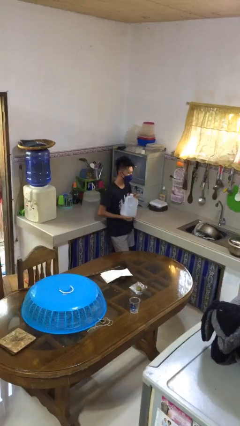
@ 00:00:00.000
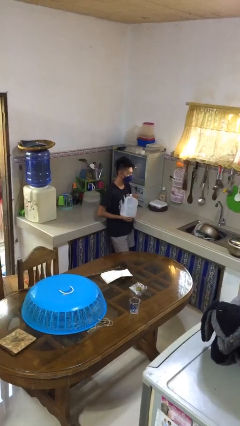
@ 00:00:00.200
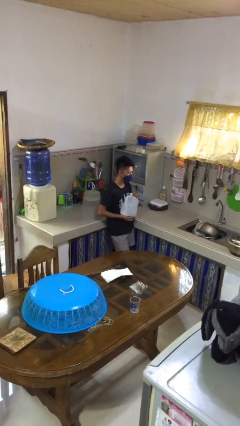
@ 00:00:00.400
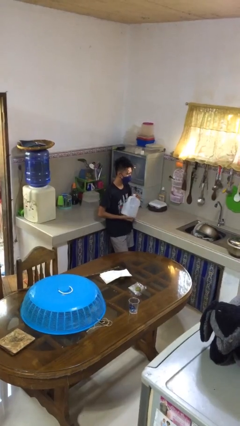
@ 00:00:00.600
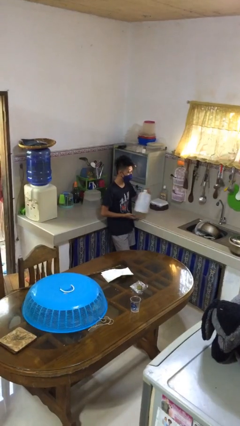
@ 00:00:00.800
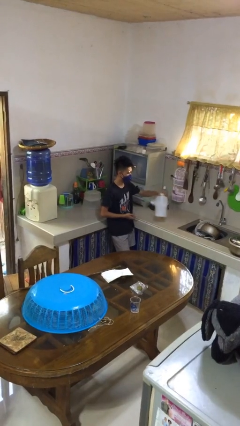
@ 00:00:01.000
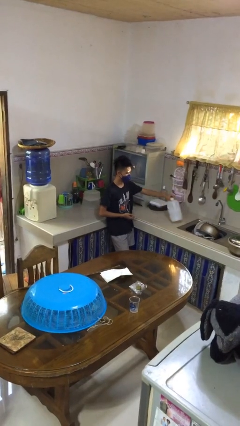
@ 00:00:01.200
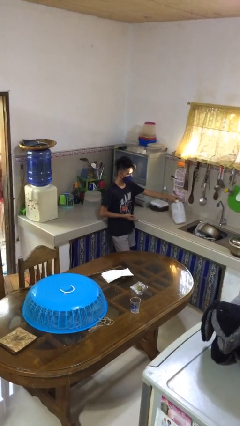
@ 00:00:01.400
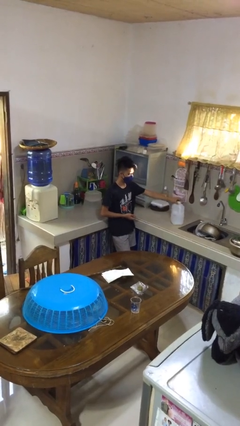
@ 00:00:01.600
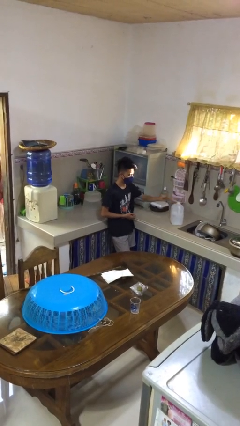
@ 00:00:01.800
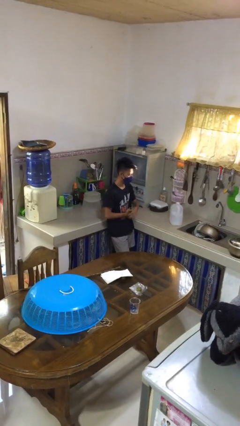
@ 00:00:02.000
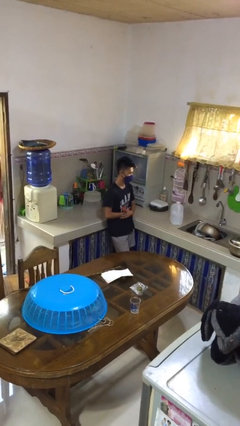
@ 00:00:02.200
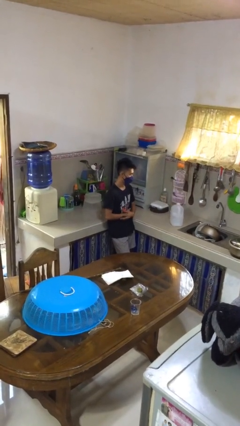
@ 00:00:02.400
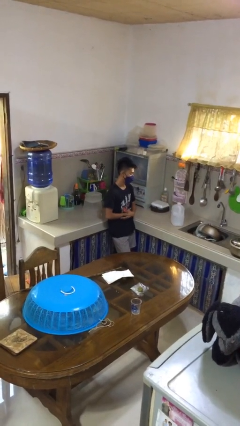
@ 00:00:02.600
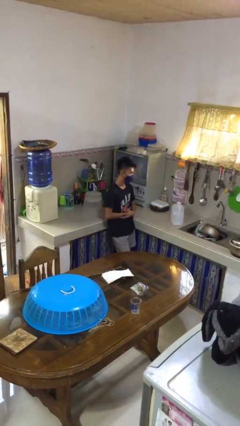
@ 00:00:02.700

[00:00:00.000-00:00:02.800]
person picks up object from countertop

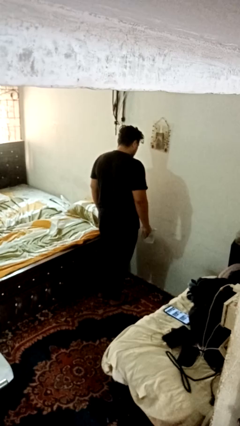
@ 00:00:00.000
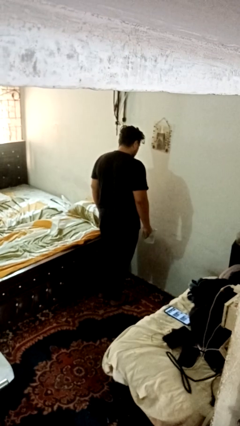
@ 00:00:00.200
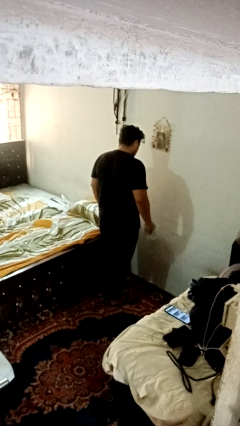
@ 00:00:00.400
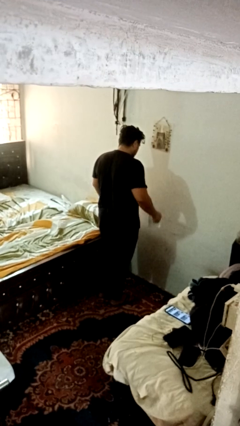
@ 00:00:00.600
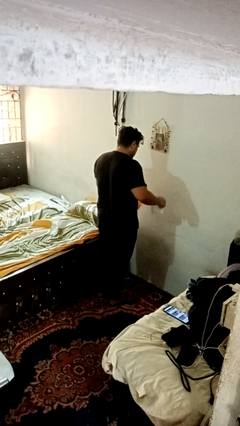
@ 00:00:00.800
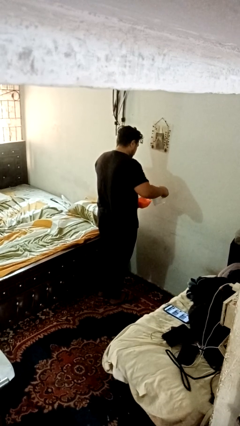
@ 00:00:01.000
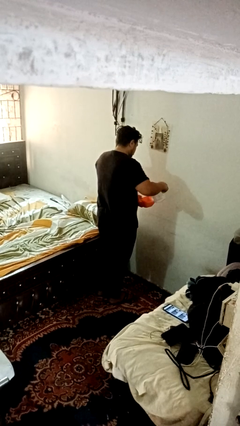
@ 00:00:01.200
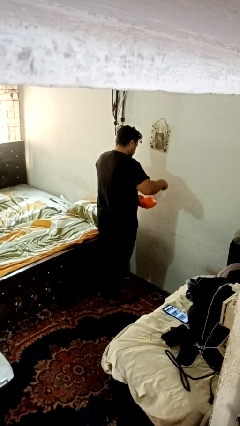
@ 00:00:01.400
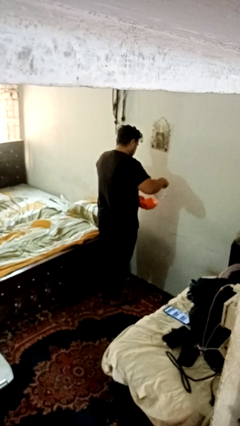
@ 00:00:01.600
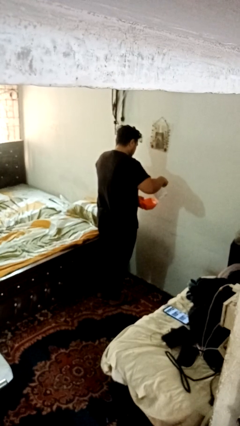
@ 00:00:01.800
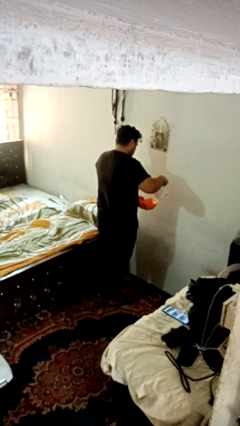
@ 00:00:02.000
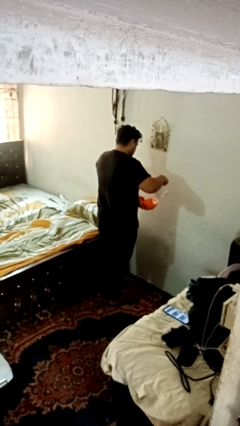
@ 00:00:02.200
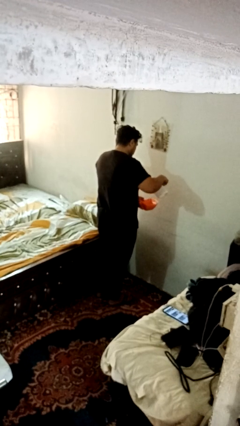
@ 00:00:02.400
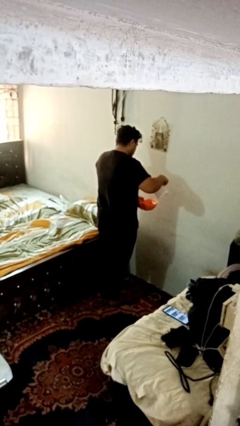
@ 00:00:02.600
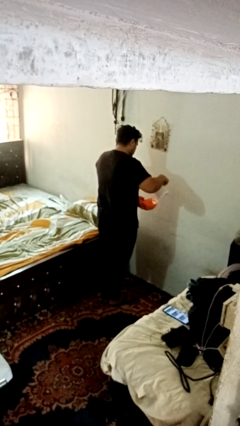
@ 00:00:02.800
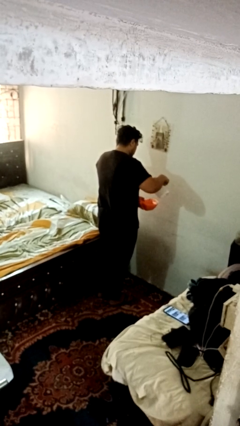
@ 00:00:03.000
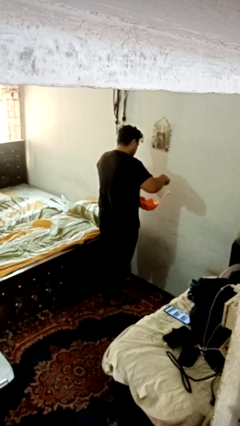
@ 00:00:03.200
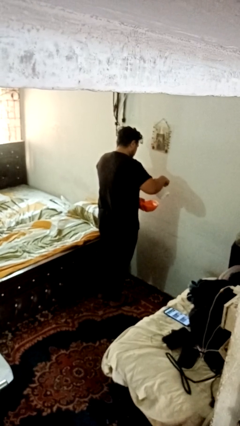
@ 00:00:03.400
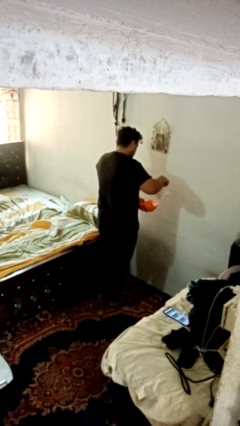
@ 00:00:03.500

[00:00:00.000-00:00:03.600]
person pours into bowl

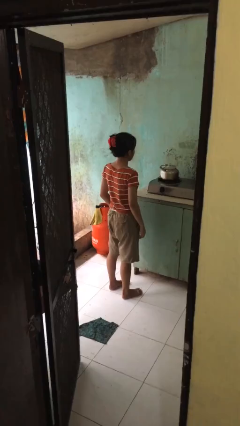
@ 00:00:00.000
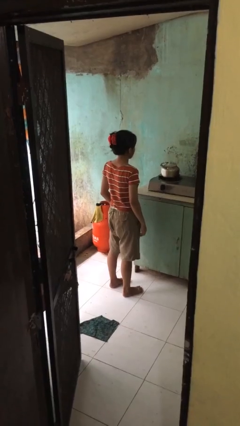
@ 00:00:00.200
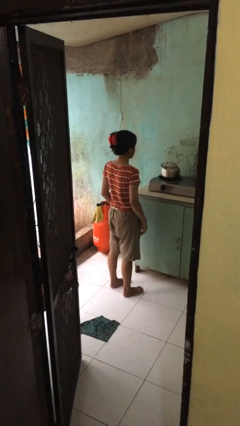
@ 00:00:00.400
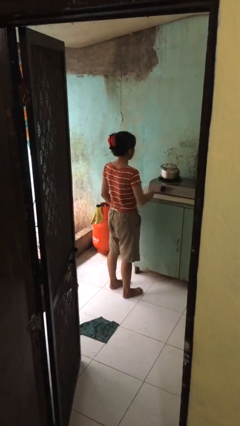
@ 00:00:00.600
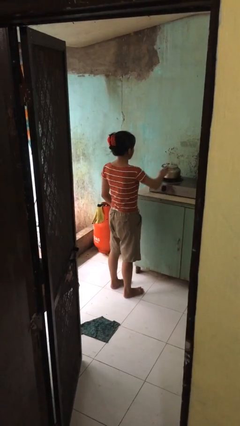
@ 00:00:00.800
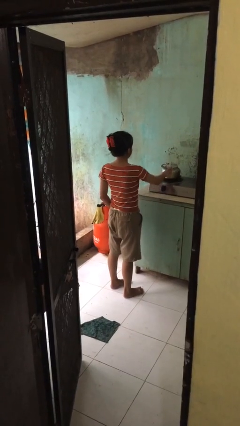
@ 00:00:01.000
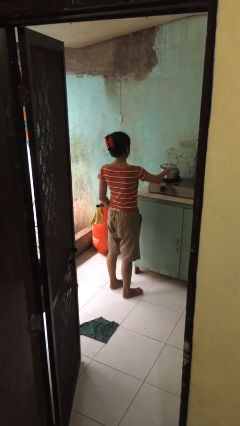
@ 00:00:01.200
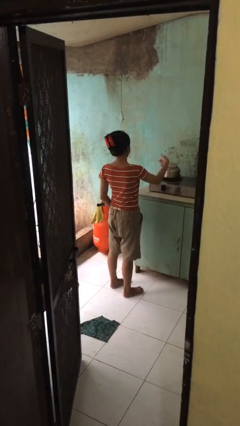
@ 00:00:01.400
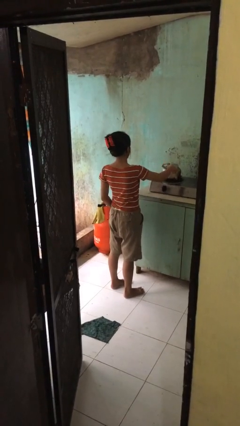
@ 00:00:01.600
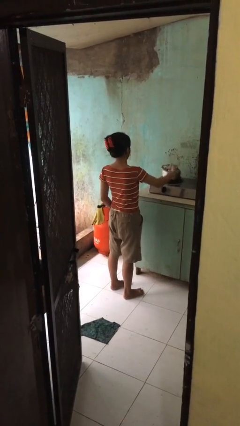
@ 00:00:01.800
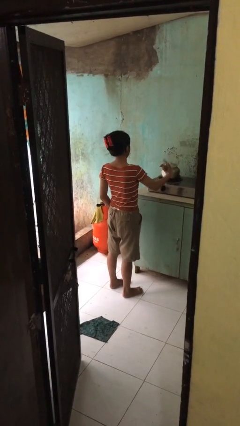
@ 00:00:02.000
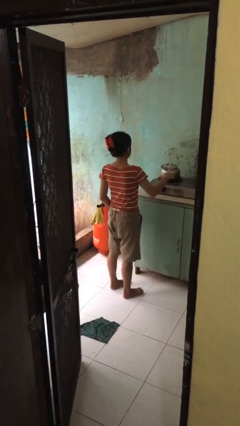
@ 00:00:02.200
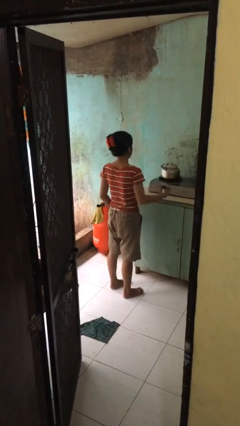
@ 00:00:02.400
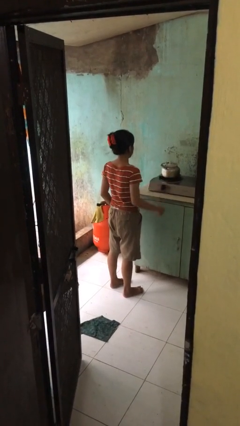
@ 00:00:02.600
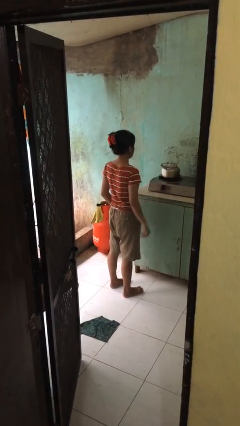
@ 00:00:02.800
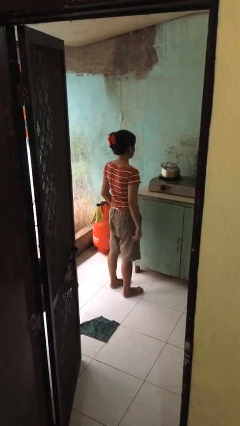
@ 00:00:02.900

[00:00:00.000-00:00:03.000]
person burns hand

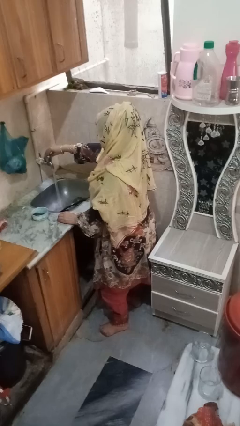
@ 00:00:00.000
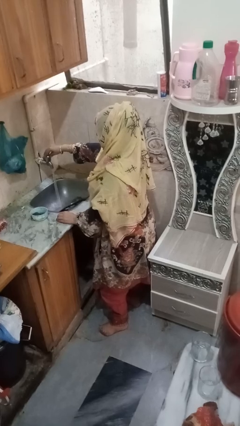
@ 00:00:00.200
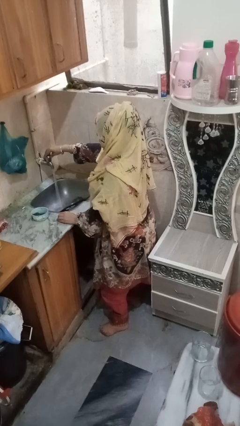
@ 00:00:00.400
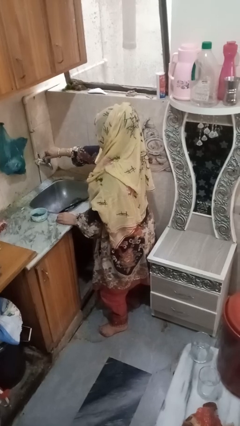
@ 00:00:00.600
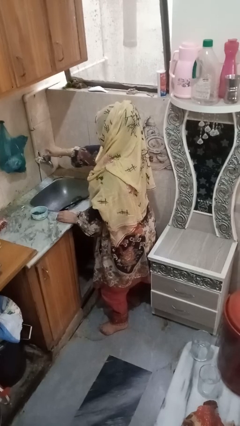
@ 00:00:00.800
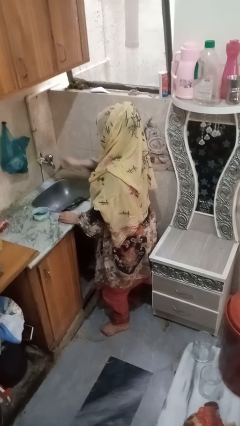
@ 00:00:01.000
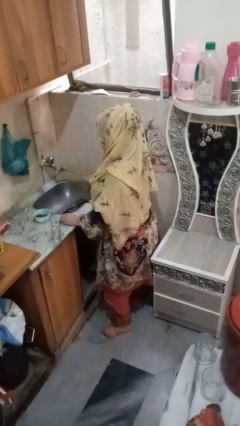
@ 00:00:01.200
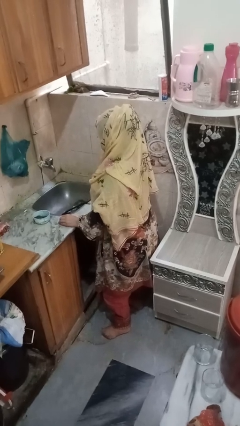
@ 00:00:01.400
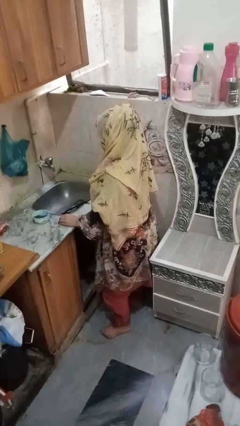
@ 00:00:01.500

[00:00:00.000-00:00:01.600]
person turns off faucet

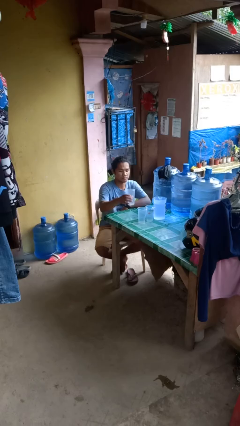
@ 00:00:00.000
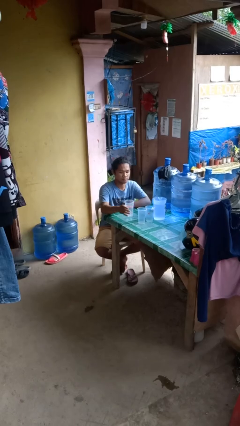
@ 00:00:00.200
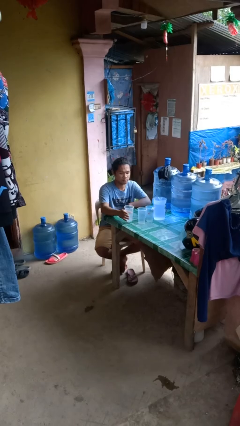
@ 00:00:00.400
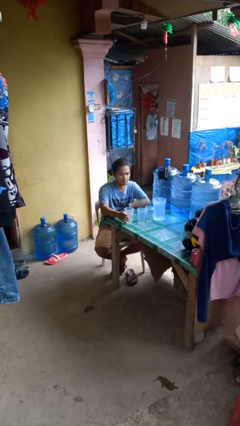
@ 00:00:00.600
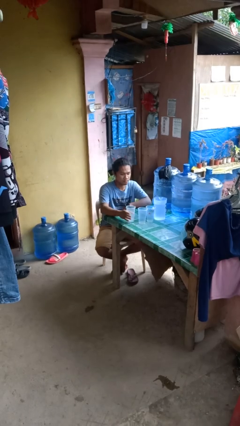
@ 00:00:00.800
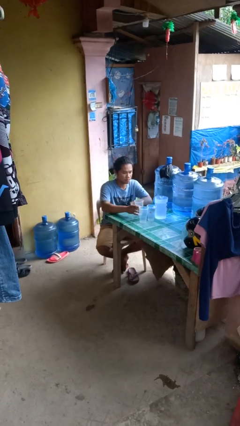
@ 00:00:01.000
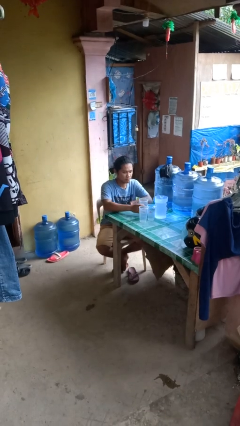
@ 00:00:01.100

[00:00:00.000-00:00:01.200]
person puts down object on table

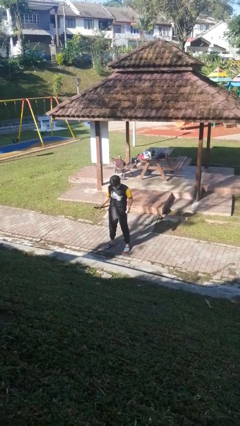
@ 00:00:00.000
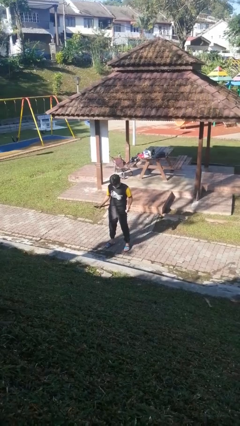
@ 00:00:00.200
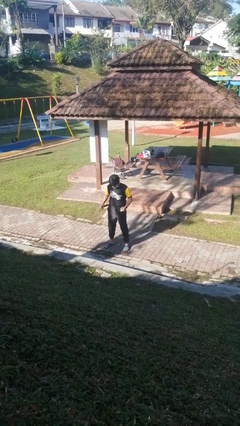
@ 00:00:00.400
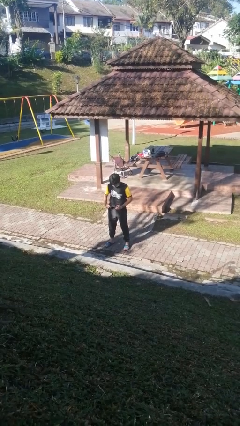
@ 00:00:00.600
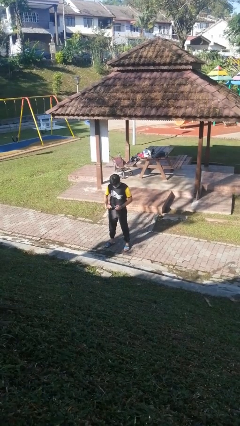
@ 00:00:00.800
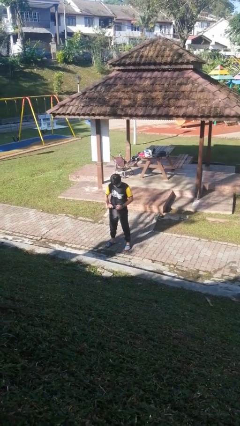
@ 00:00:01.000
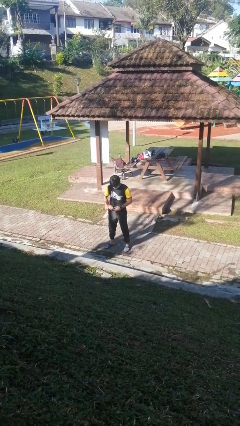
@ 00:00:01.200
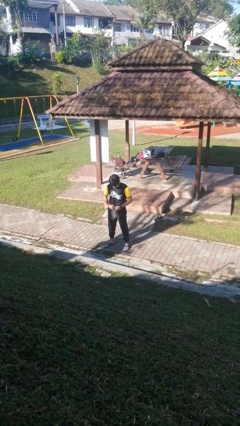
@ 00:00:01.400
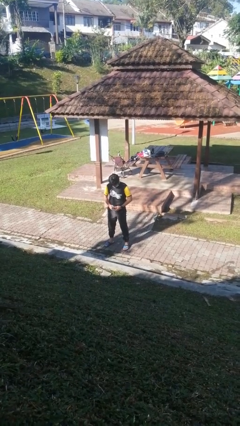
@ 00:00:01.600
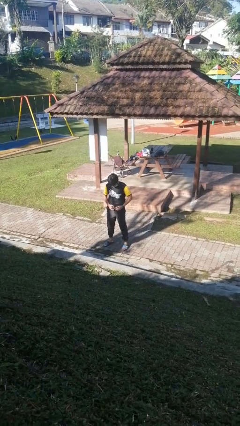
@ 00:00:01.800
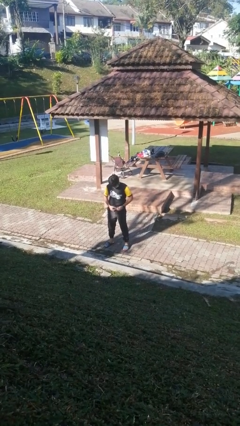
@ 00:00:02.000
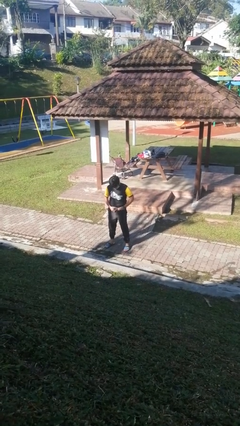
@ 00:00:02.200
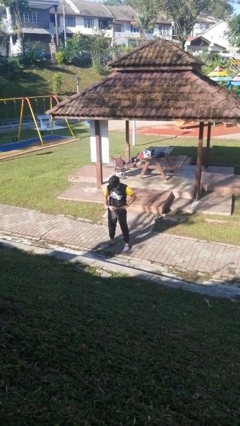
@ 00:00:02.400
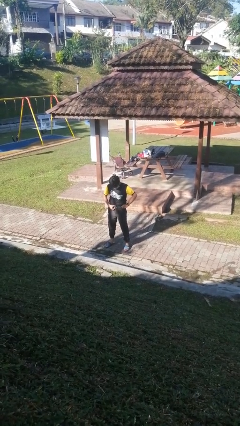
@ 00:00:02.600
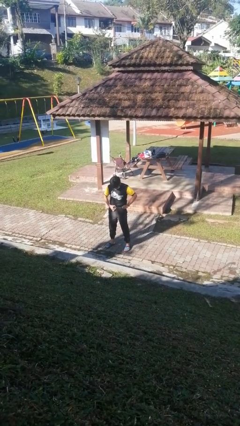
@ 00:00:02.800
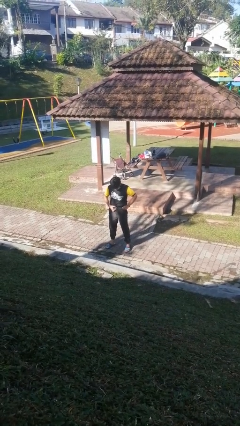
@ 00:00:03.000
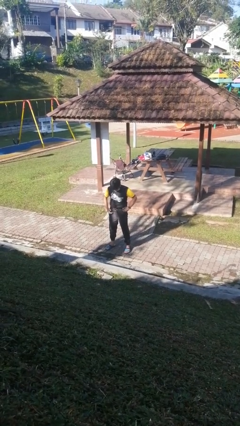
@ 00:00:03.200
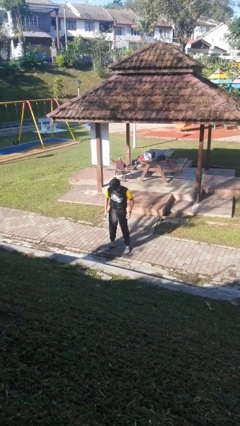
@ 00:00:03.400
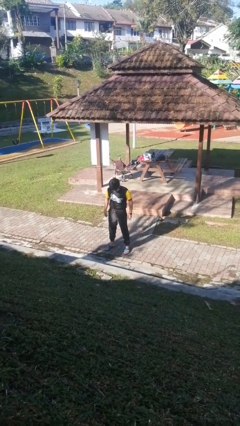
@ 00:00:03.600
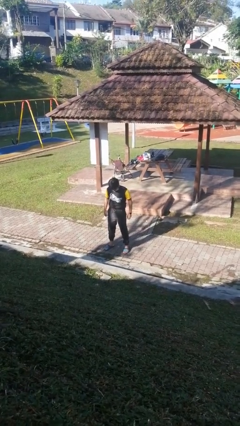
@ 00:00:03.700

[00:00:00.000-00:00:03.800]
person puts on belt

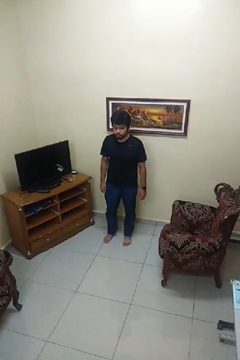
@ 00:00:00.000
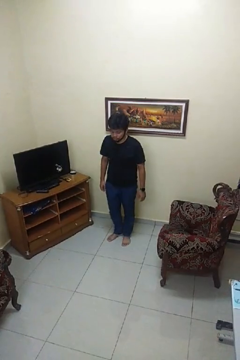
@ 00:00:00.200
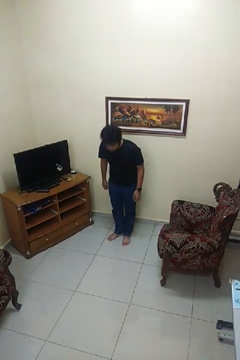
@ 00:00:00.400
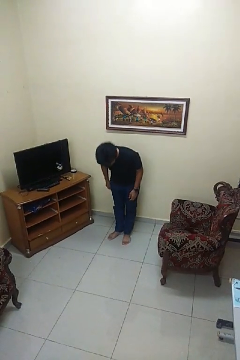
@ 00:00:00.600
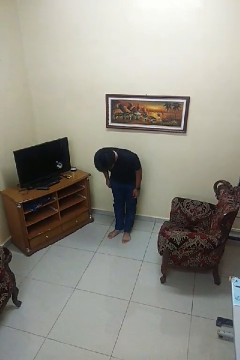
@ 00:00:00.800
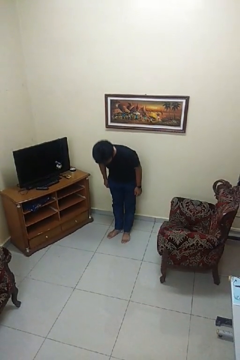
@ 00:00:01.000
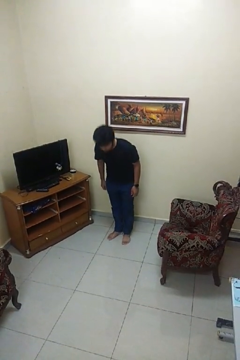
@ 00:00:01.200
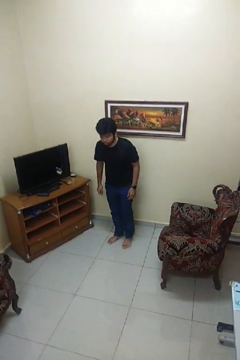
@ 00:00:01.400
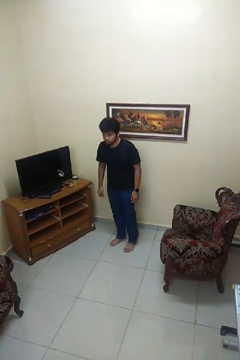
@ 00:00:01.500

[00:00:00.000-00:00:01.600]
person bows
